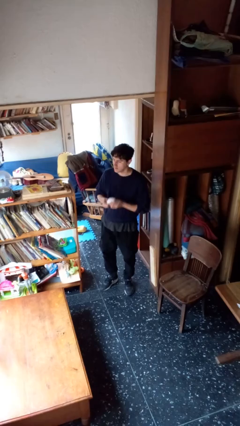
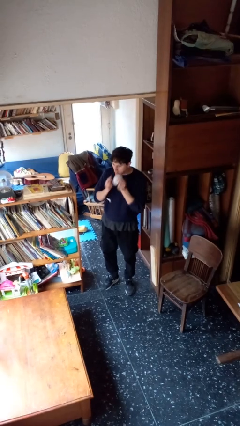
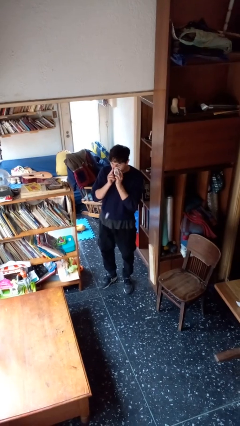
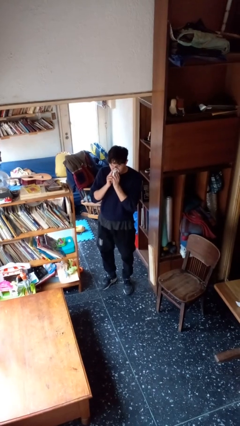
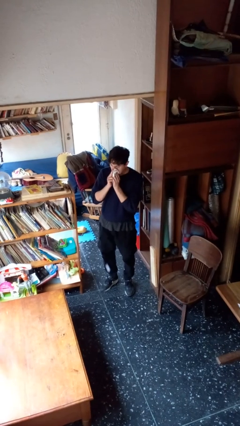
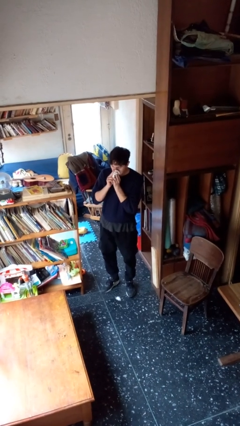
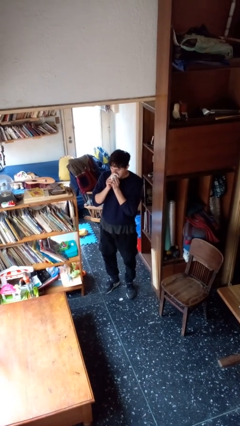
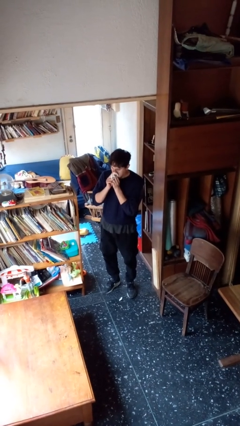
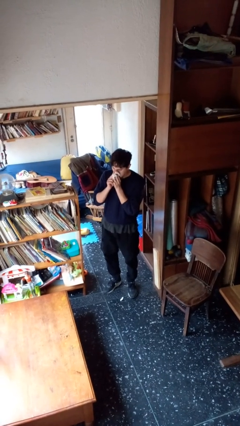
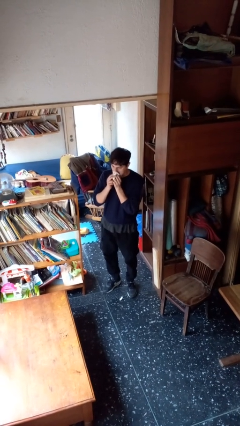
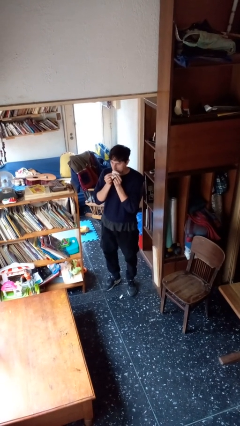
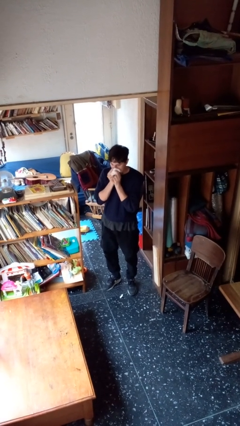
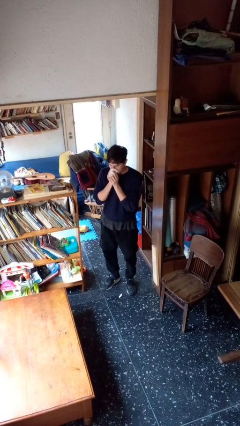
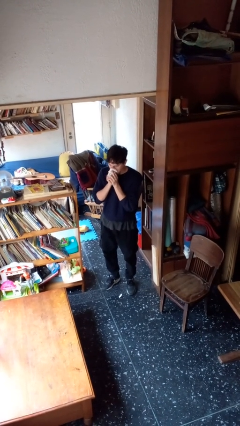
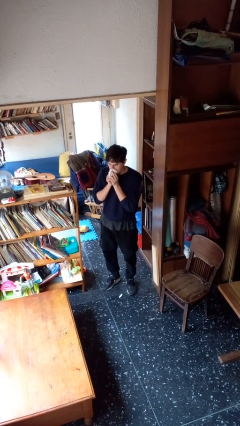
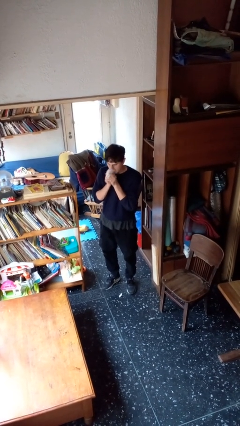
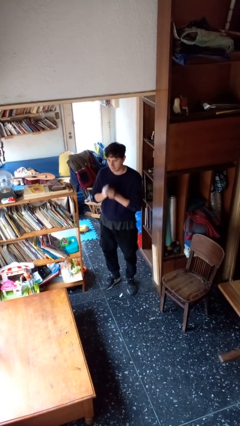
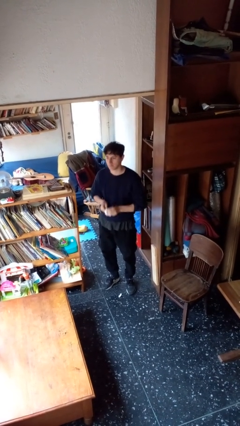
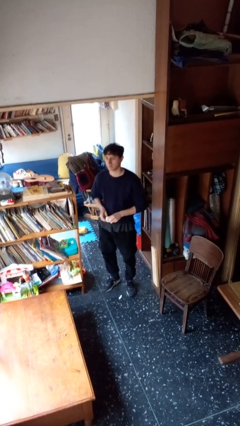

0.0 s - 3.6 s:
person blows nose

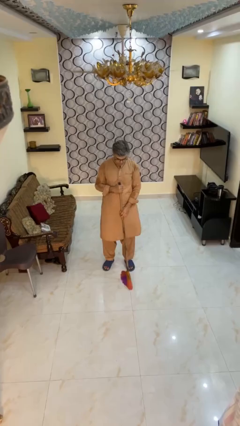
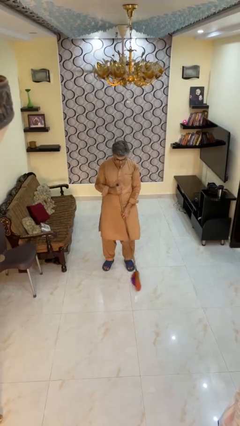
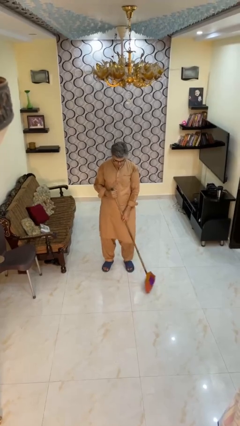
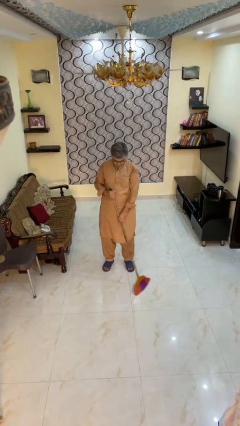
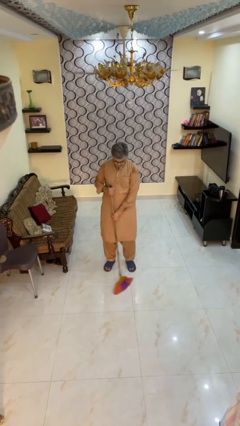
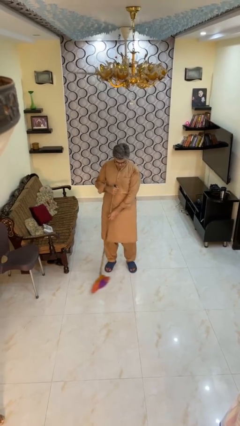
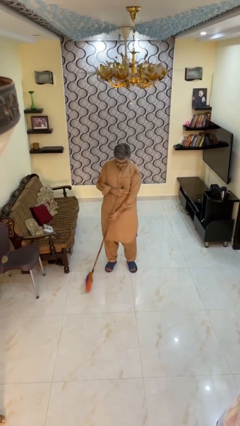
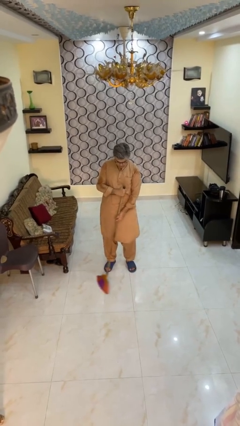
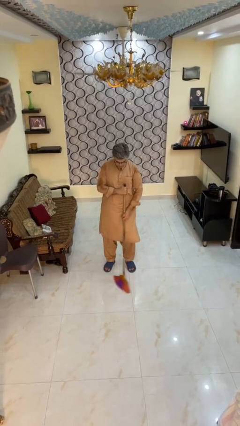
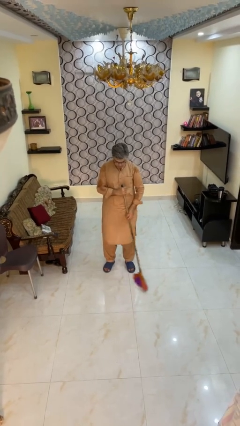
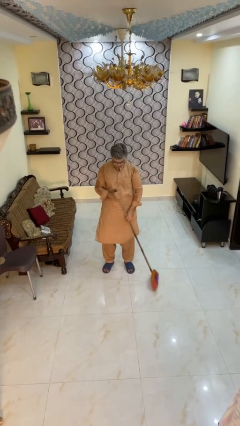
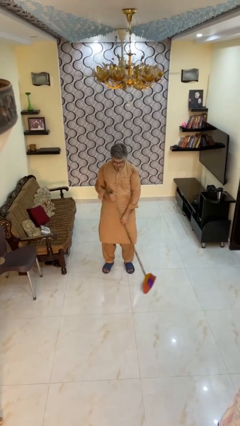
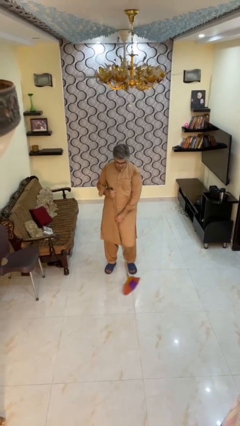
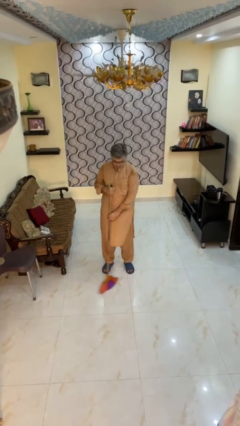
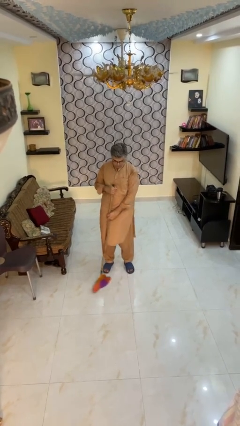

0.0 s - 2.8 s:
person mops

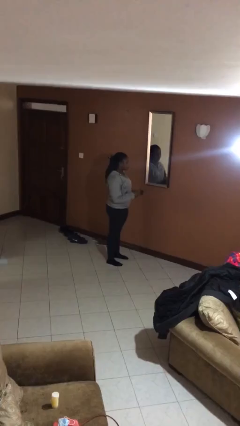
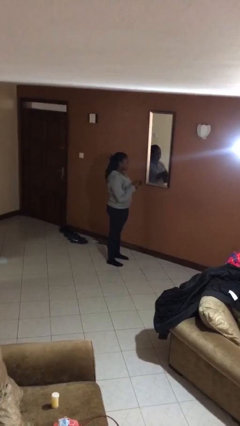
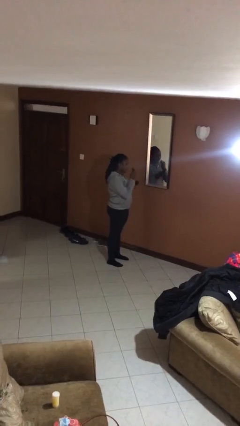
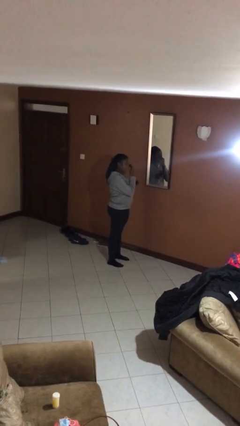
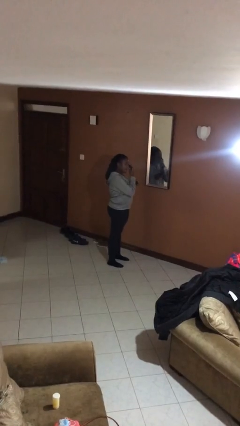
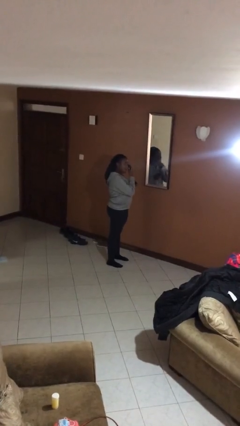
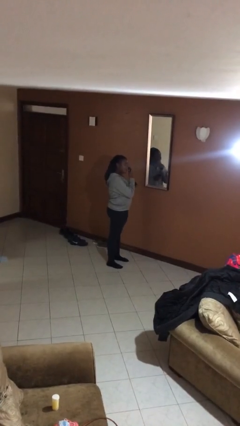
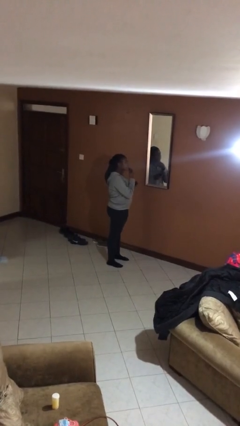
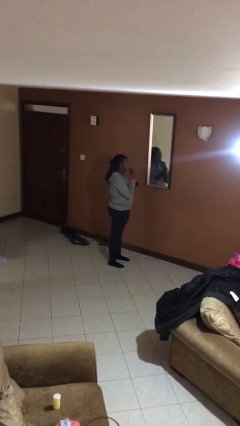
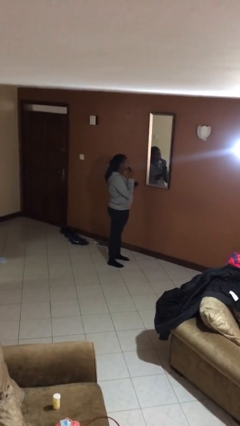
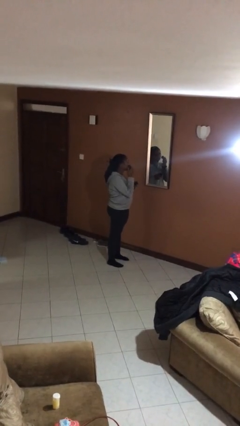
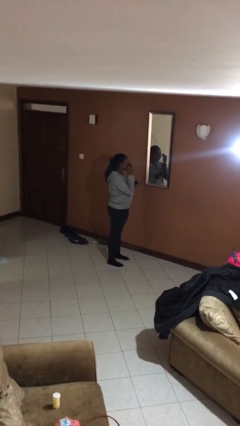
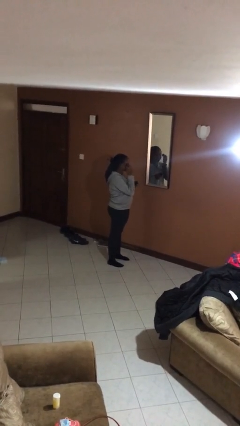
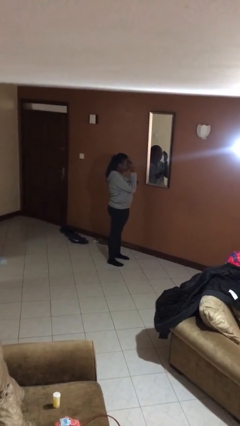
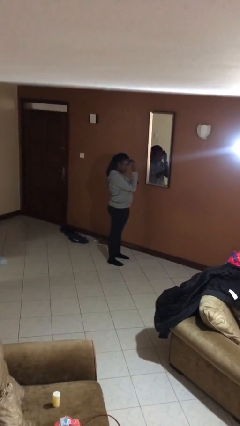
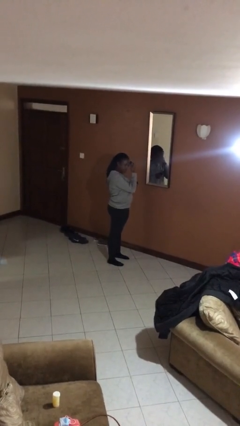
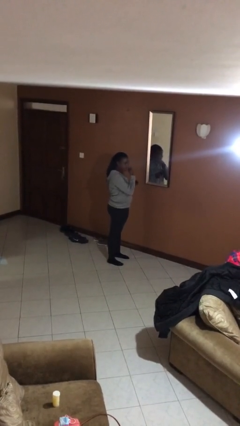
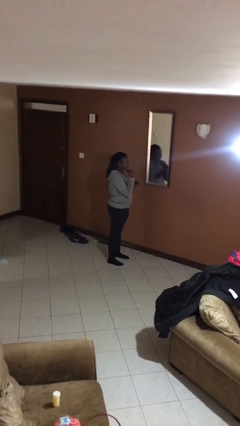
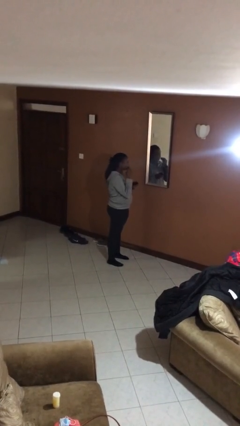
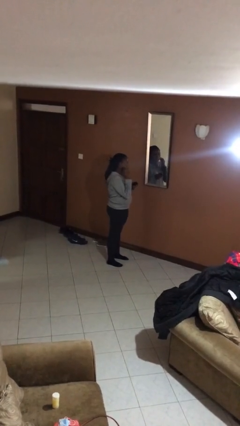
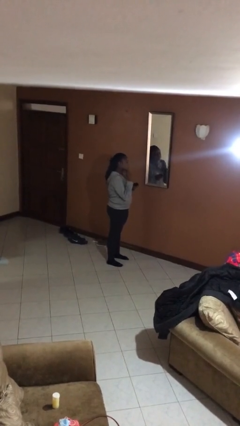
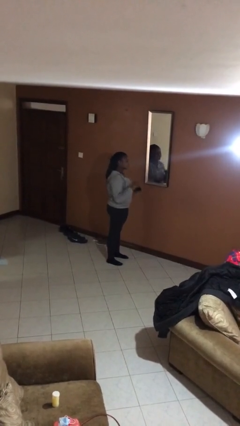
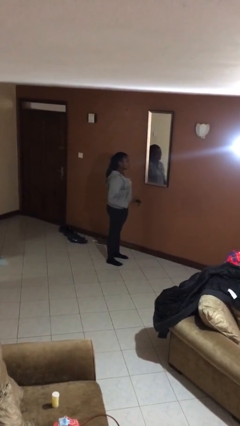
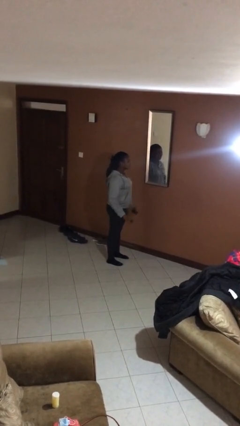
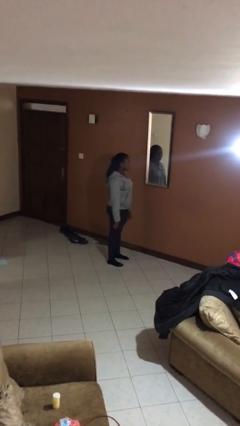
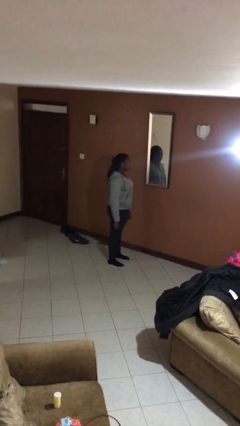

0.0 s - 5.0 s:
person applies foundation makeup

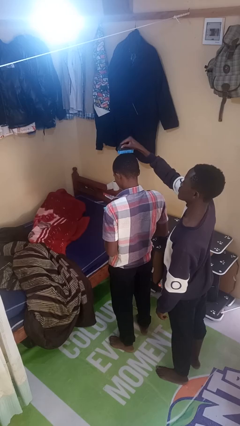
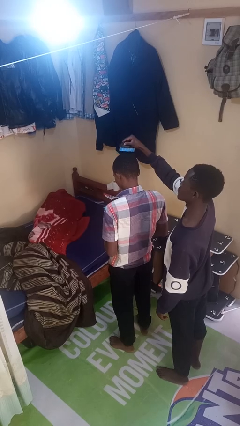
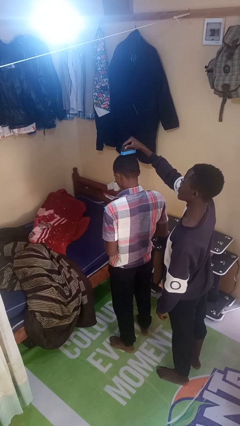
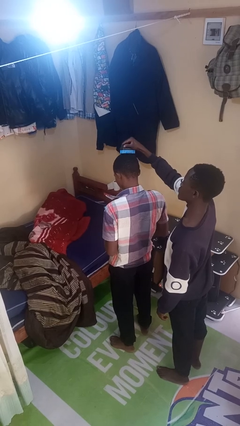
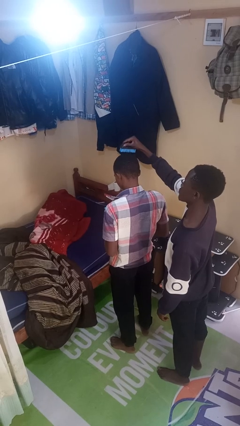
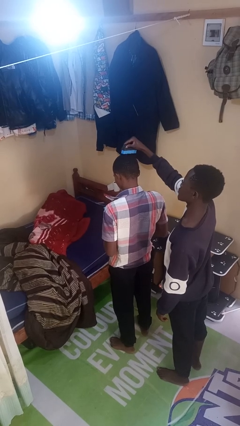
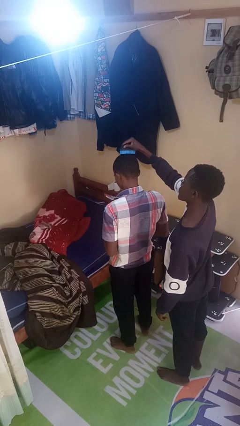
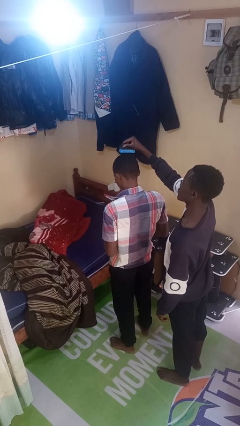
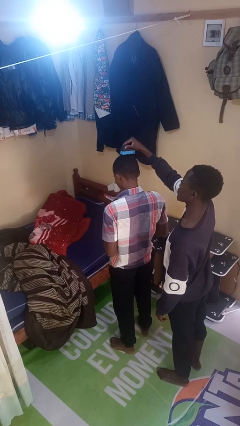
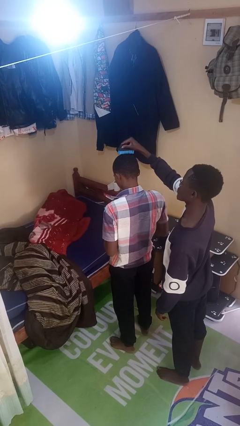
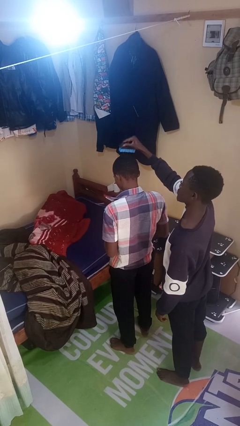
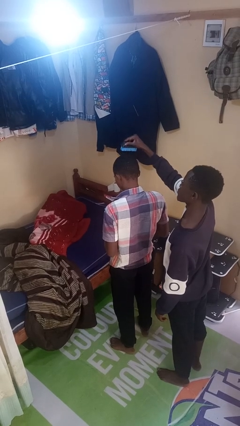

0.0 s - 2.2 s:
person brushes hair of person

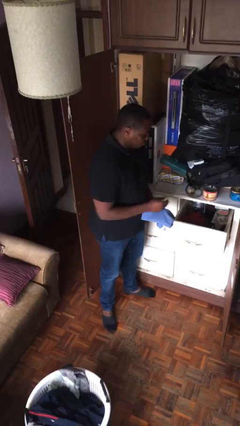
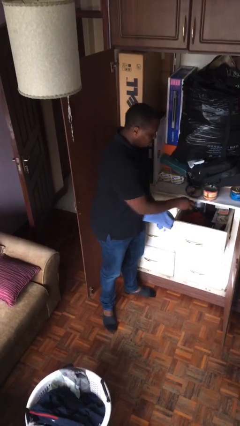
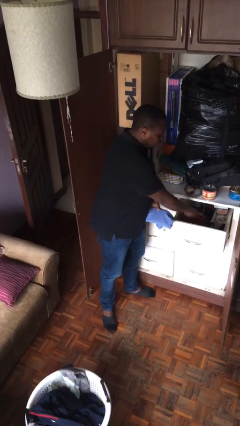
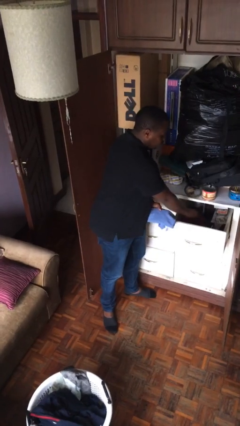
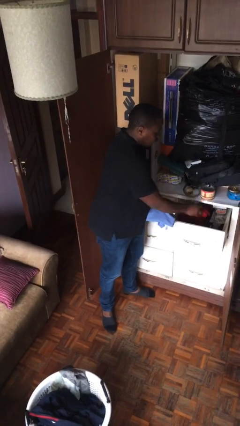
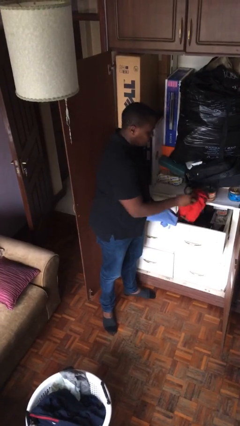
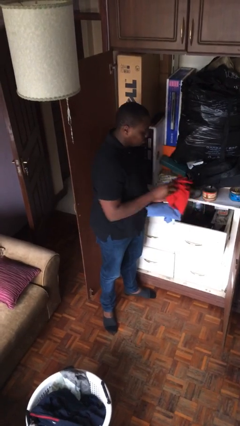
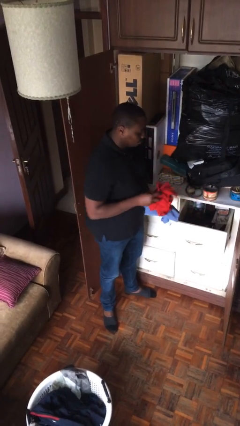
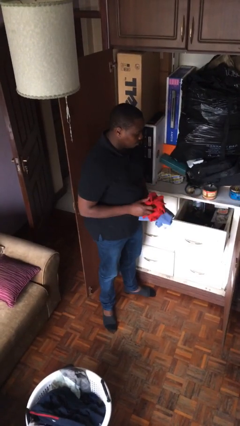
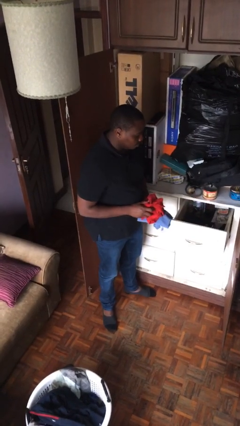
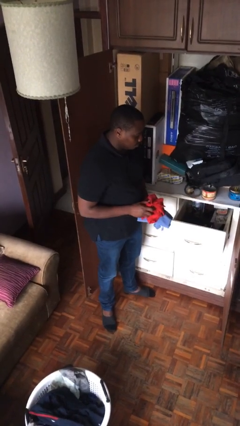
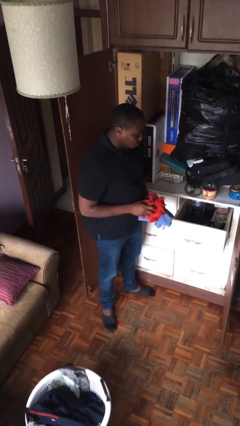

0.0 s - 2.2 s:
person takes clothes from dresser

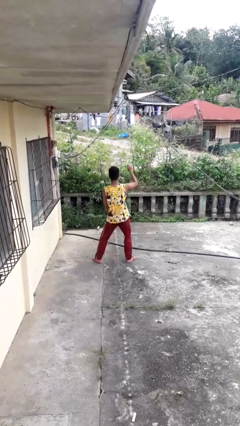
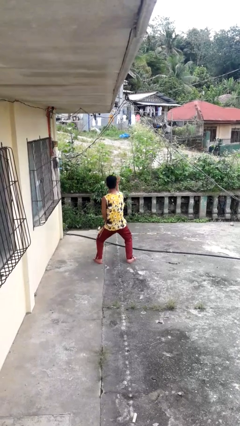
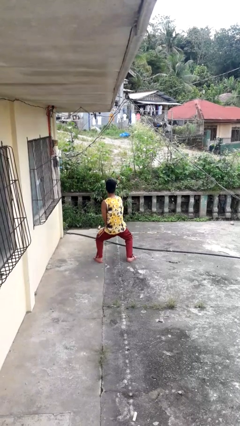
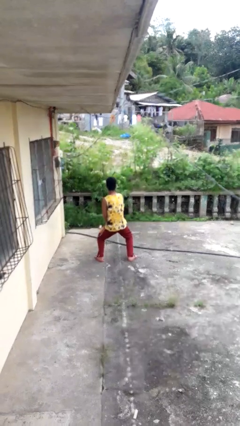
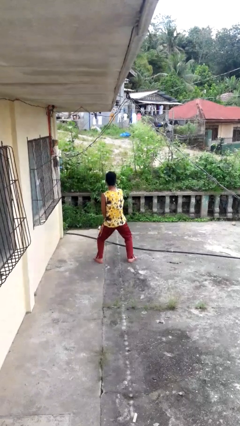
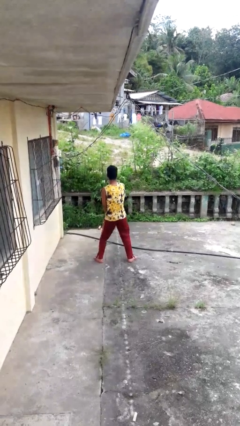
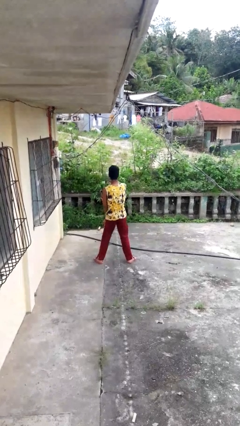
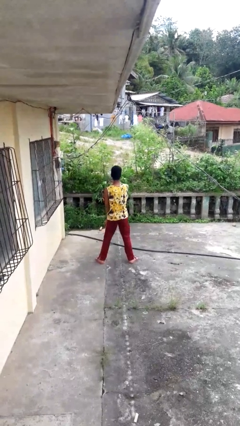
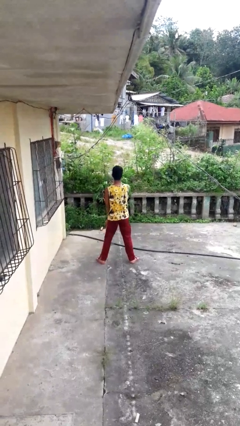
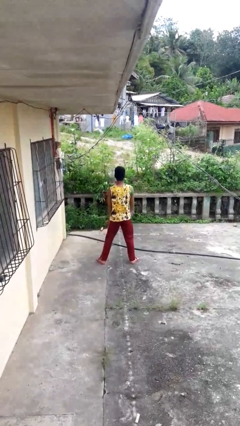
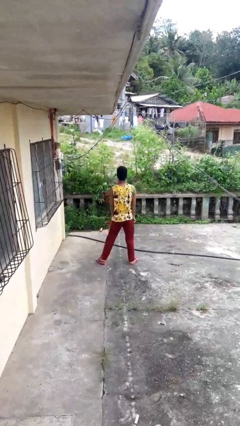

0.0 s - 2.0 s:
person karate chop
